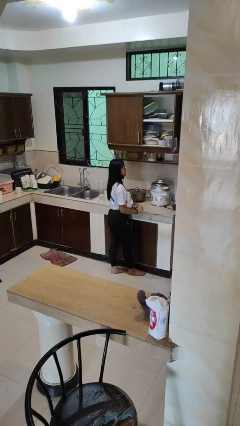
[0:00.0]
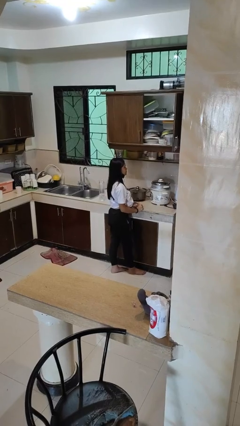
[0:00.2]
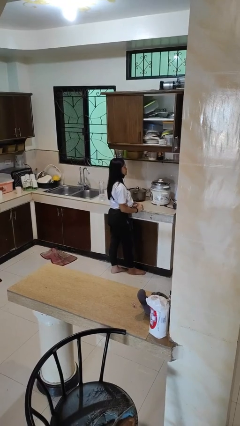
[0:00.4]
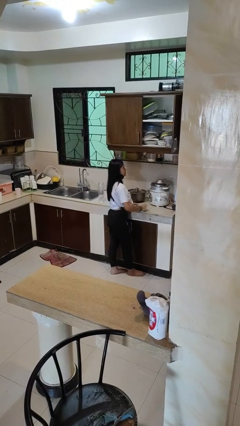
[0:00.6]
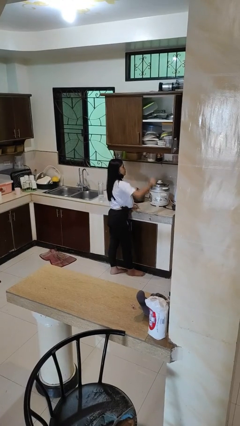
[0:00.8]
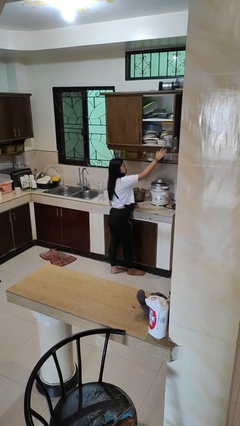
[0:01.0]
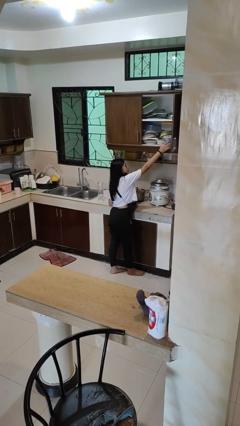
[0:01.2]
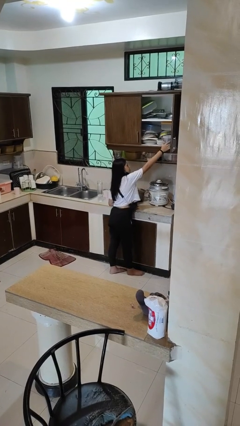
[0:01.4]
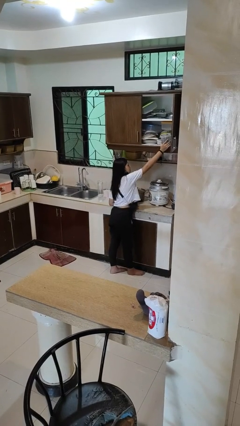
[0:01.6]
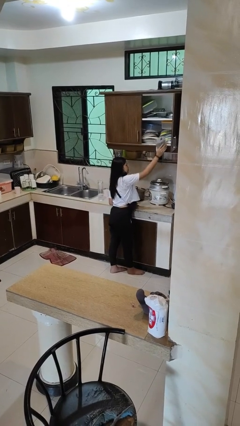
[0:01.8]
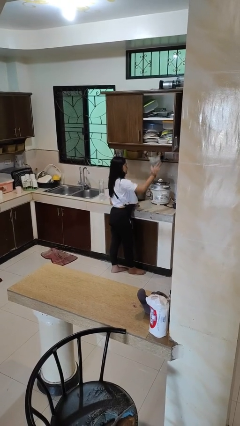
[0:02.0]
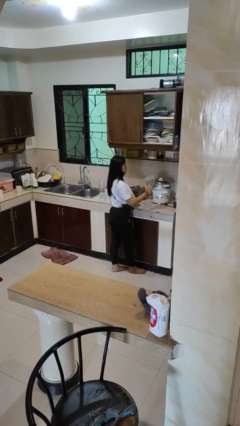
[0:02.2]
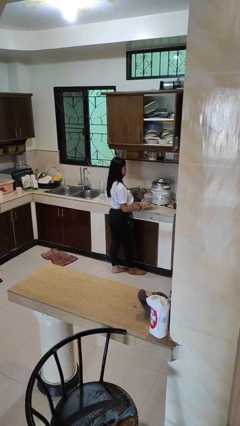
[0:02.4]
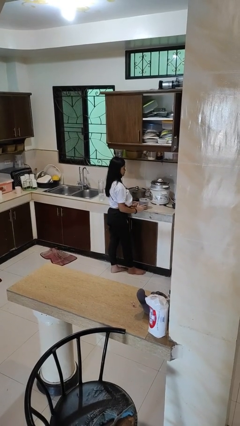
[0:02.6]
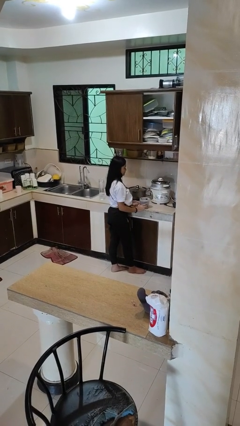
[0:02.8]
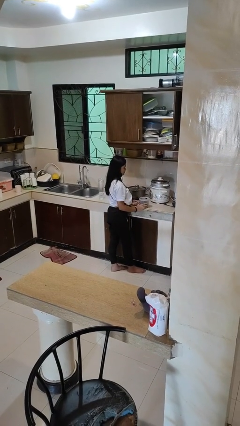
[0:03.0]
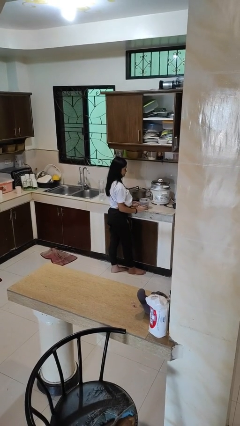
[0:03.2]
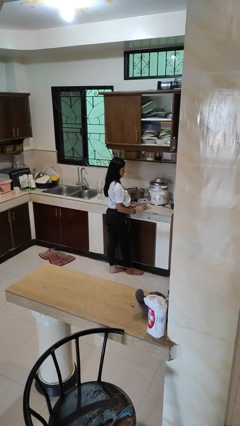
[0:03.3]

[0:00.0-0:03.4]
person picks up object from shelf

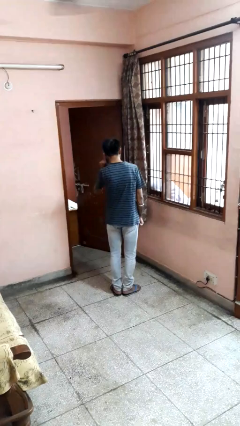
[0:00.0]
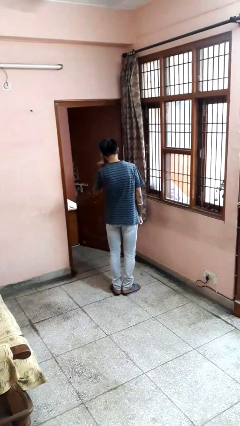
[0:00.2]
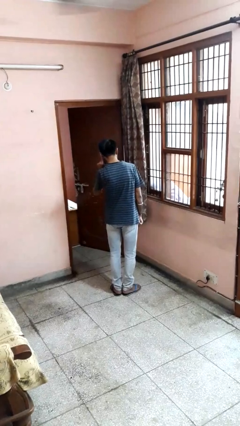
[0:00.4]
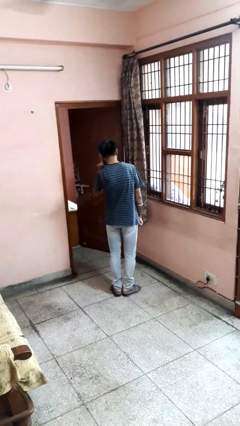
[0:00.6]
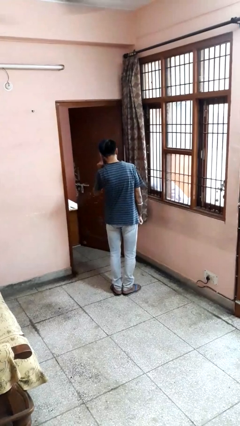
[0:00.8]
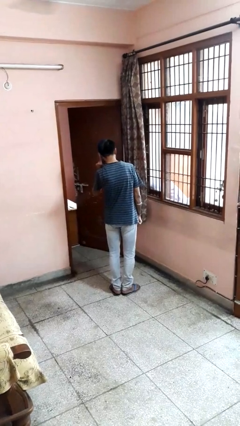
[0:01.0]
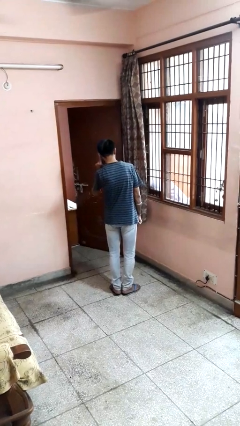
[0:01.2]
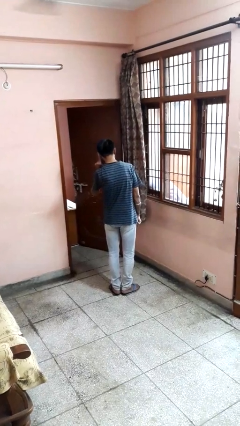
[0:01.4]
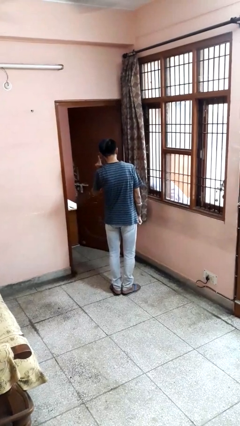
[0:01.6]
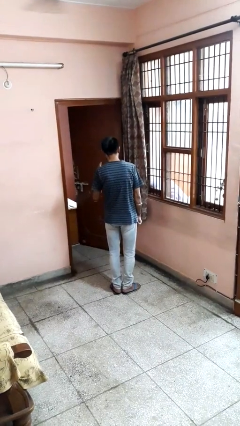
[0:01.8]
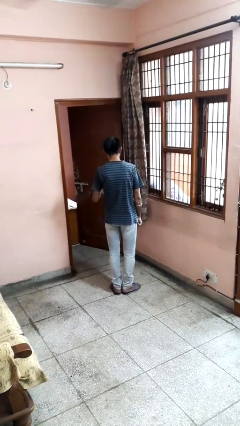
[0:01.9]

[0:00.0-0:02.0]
person gestures listen closely

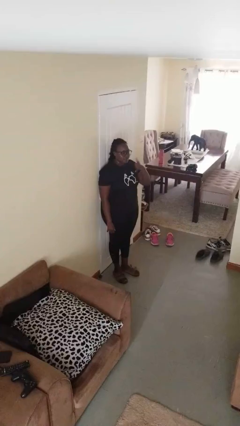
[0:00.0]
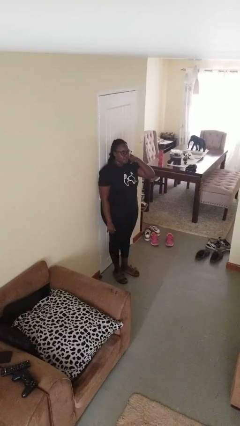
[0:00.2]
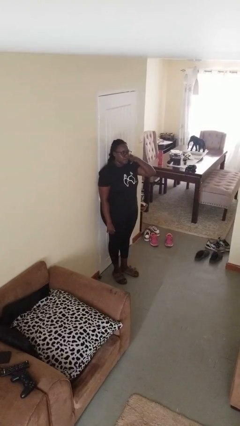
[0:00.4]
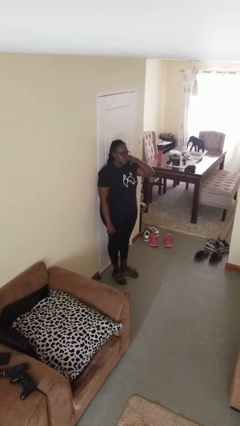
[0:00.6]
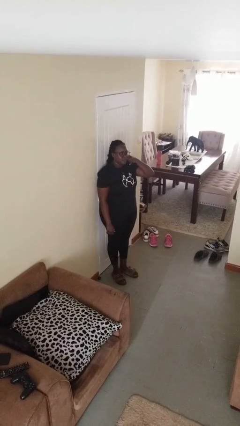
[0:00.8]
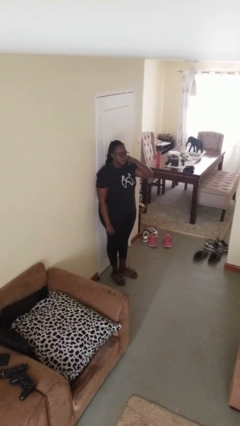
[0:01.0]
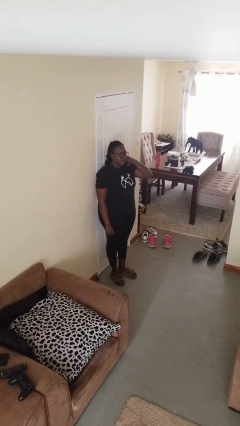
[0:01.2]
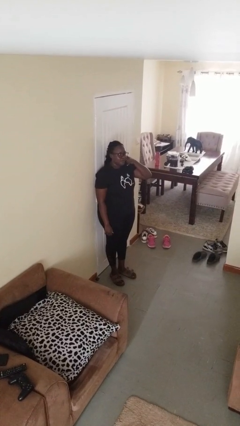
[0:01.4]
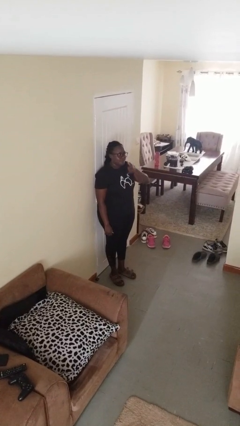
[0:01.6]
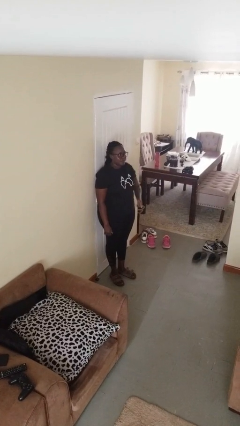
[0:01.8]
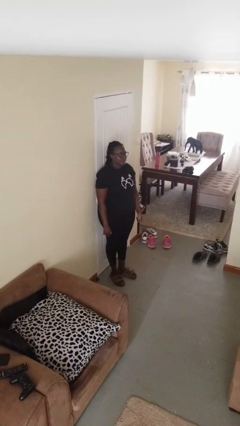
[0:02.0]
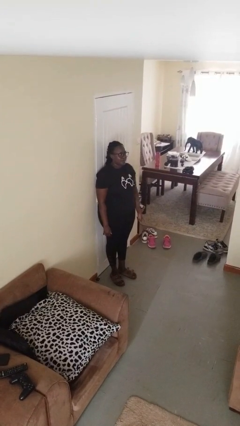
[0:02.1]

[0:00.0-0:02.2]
person gestures call me

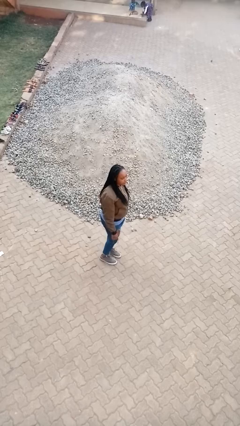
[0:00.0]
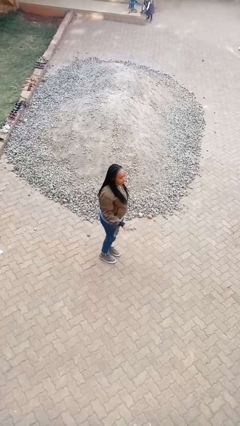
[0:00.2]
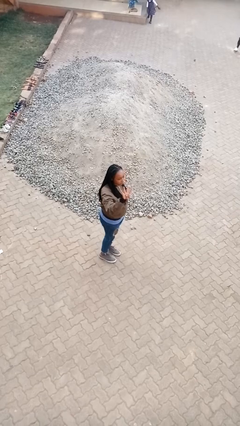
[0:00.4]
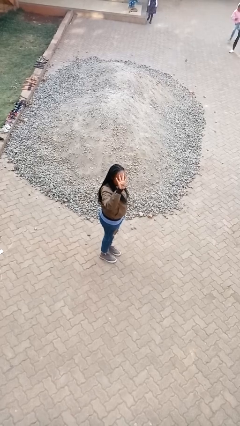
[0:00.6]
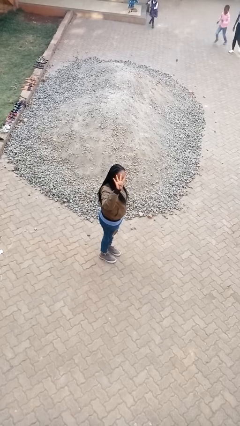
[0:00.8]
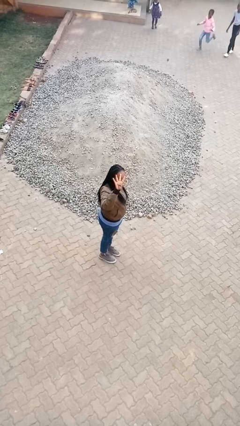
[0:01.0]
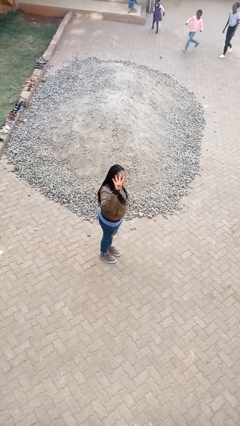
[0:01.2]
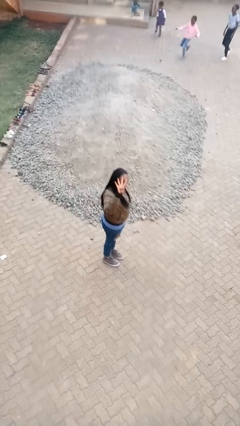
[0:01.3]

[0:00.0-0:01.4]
person gestures number four

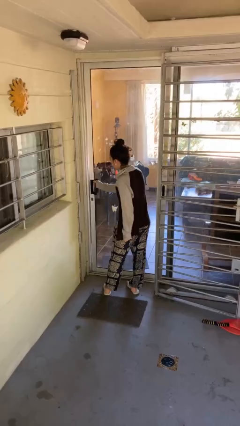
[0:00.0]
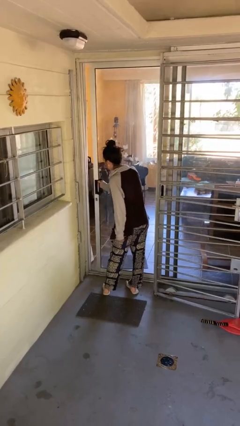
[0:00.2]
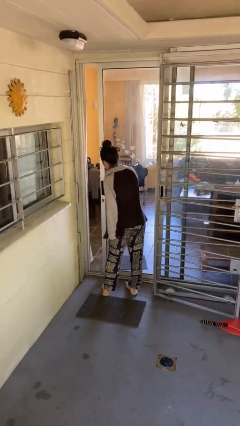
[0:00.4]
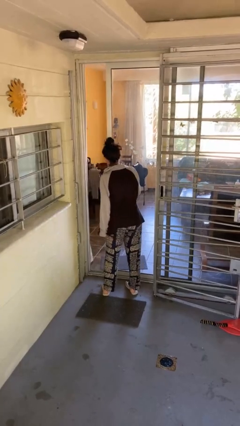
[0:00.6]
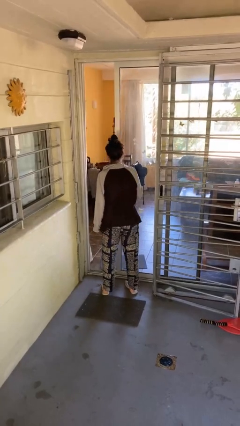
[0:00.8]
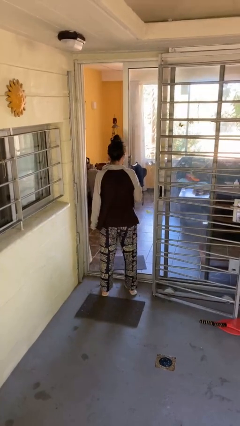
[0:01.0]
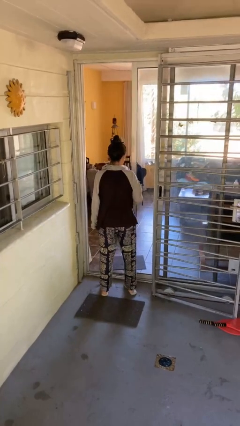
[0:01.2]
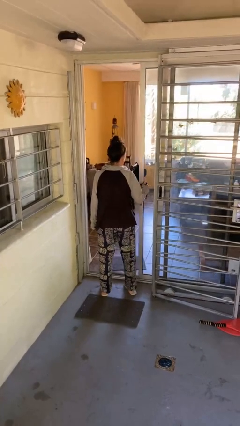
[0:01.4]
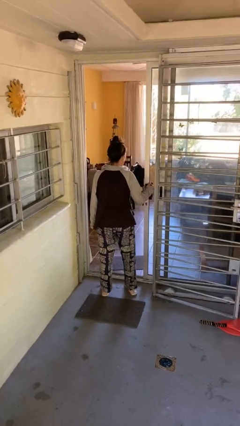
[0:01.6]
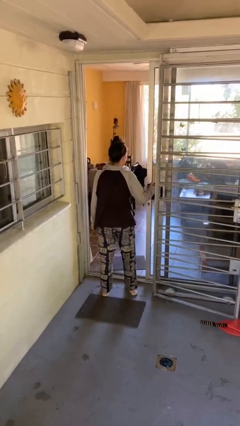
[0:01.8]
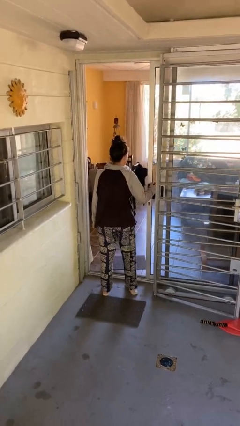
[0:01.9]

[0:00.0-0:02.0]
person opens facility door

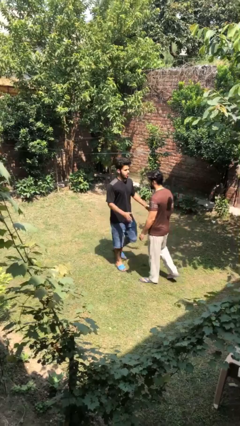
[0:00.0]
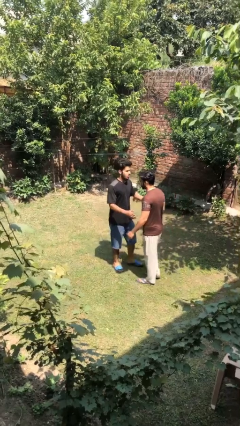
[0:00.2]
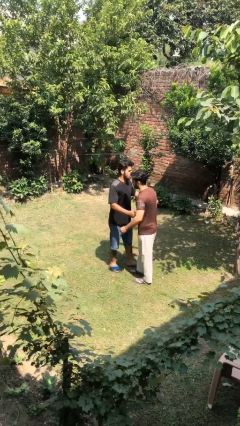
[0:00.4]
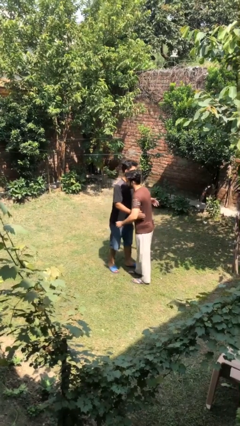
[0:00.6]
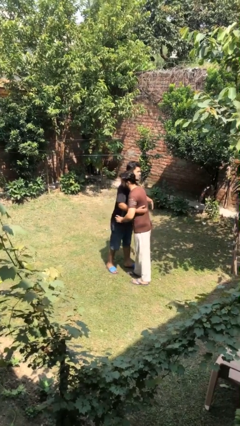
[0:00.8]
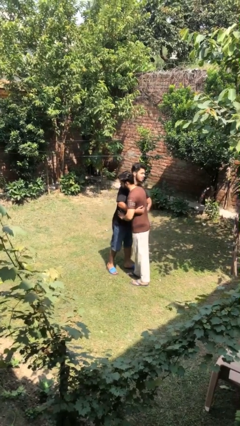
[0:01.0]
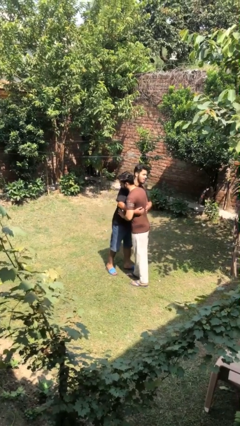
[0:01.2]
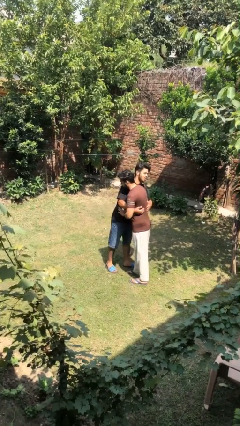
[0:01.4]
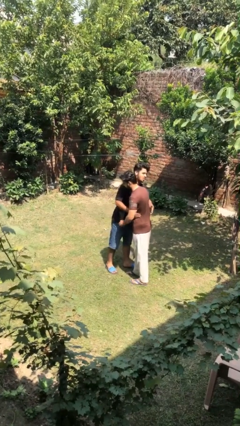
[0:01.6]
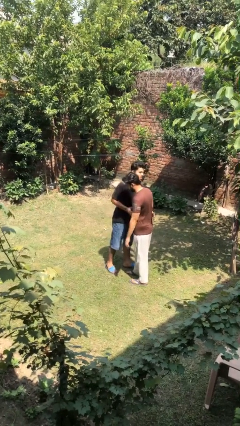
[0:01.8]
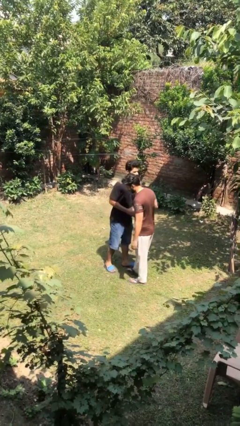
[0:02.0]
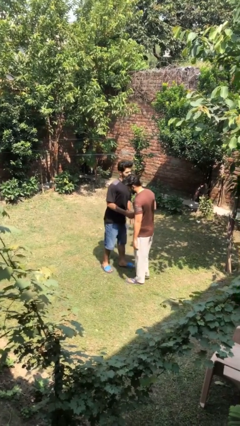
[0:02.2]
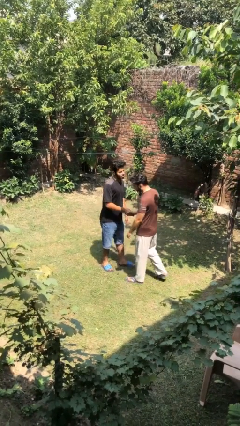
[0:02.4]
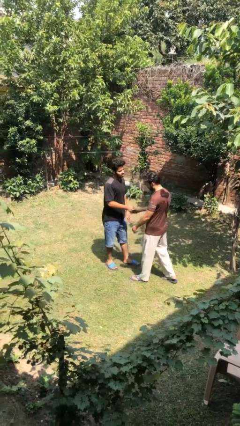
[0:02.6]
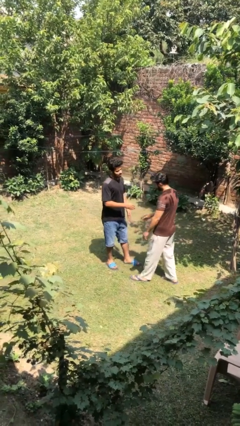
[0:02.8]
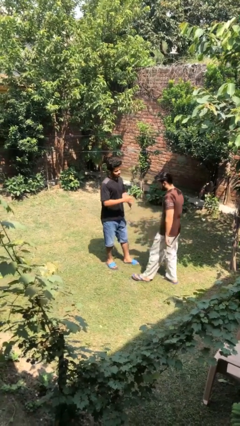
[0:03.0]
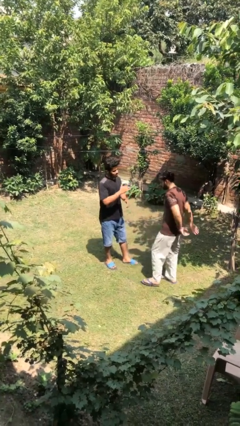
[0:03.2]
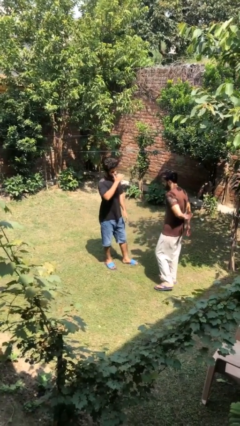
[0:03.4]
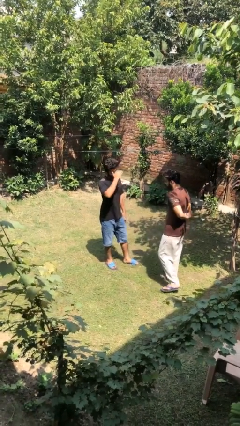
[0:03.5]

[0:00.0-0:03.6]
person embraces person

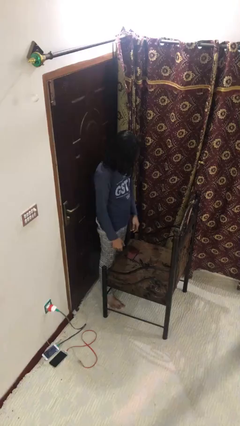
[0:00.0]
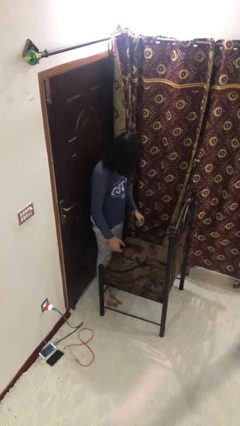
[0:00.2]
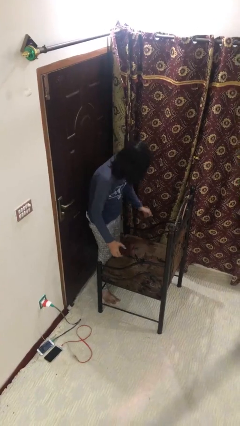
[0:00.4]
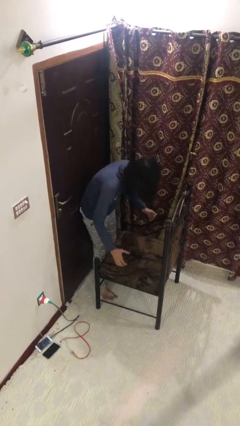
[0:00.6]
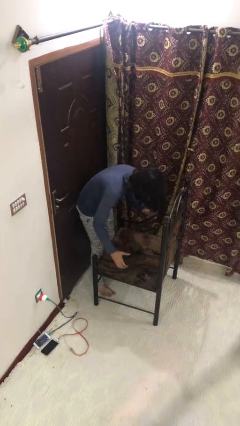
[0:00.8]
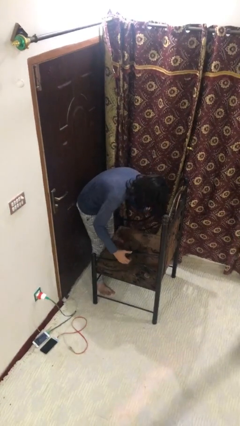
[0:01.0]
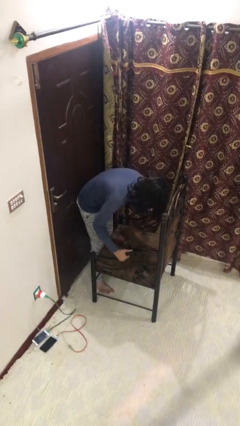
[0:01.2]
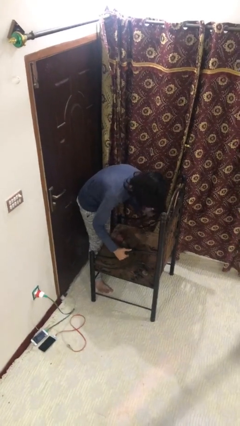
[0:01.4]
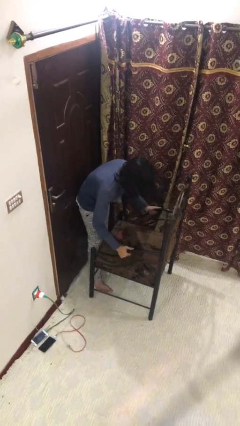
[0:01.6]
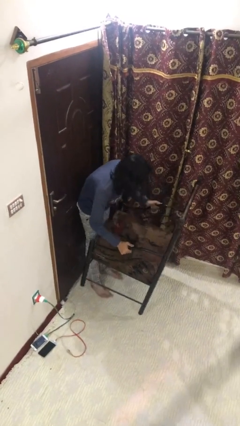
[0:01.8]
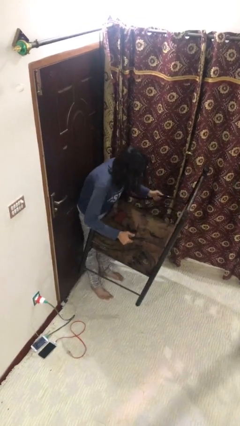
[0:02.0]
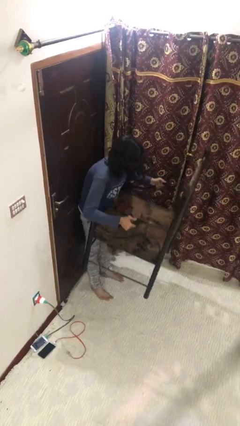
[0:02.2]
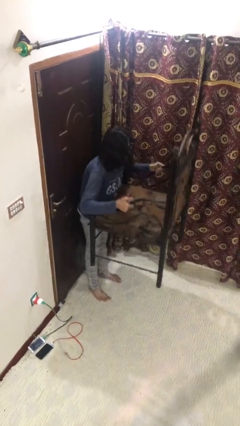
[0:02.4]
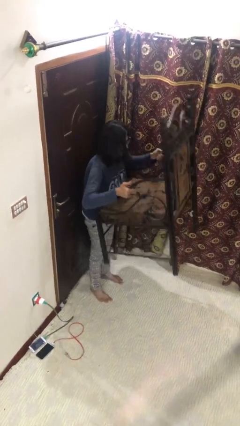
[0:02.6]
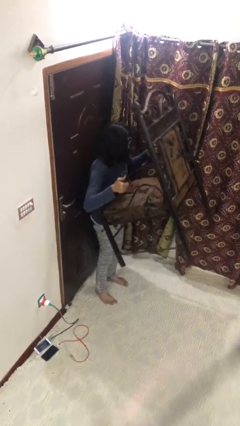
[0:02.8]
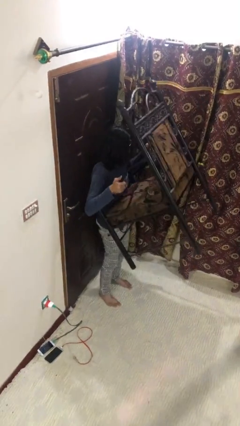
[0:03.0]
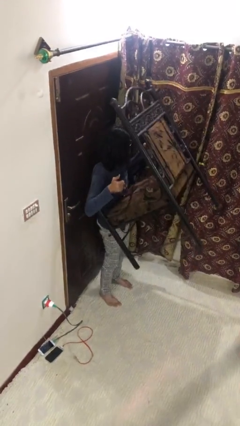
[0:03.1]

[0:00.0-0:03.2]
person picks up object from floor
